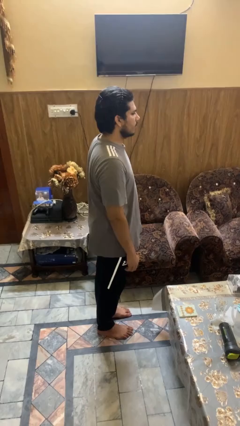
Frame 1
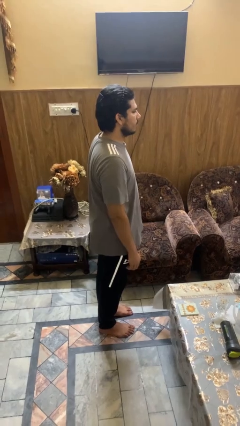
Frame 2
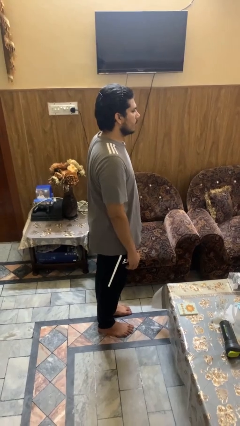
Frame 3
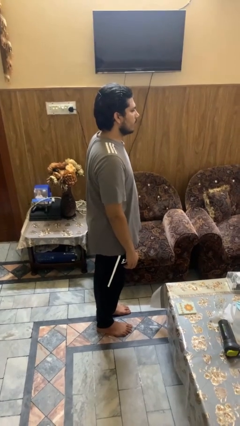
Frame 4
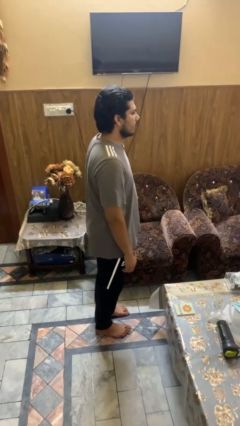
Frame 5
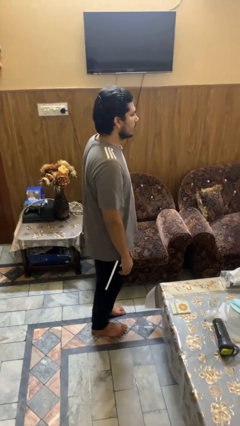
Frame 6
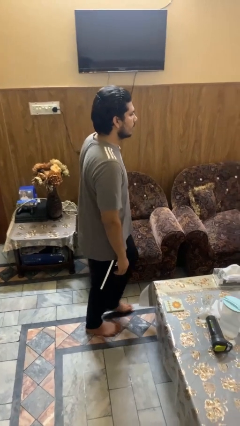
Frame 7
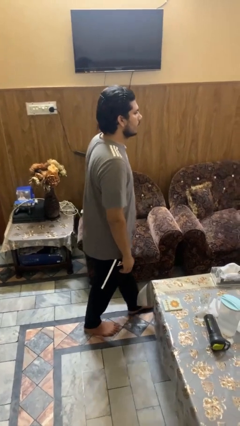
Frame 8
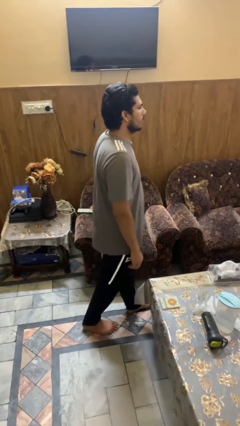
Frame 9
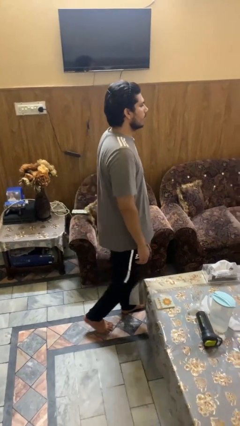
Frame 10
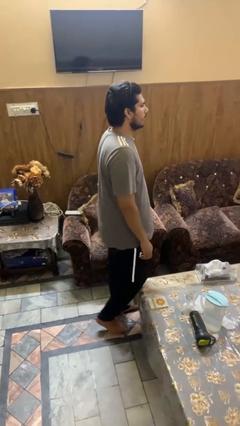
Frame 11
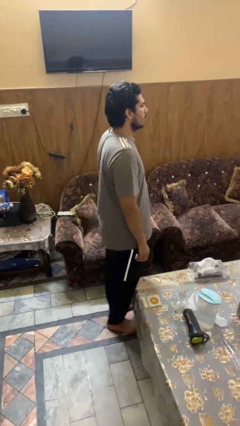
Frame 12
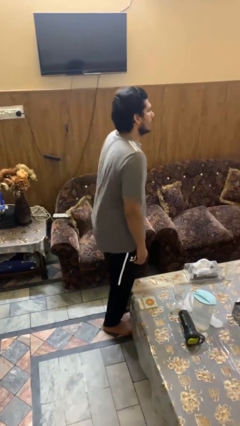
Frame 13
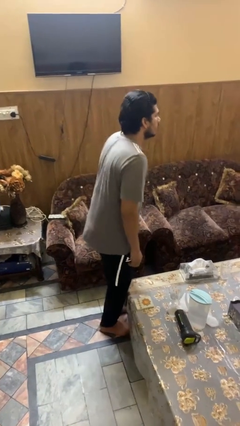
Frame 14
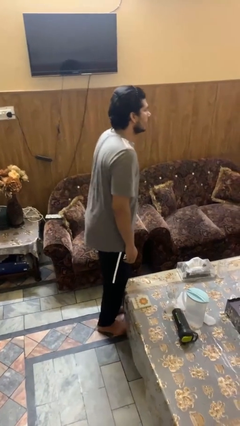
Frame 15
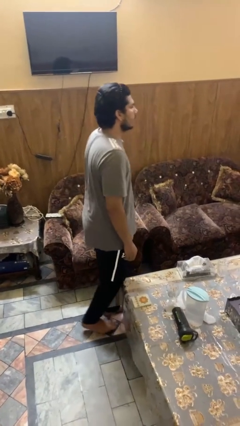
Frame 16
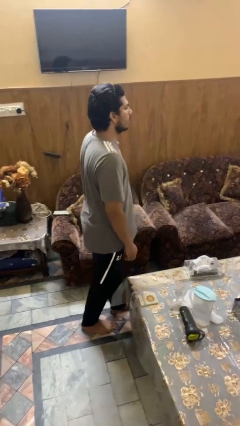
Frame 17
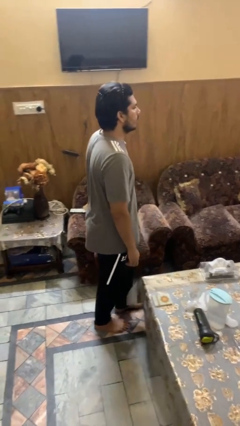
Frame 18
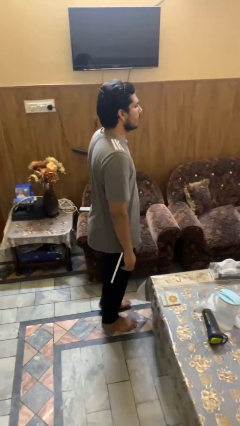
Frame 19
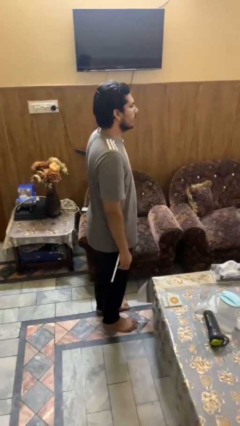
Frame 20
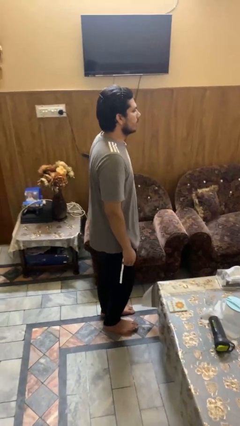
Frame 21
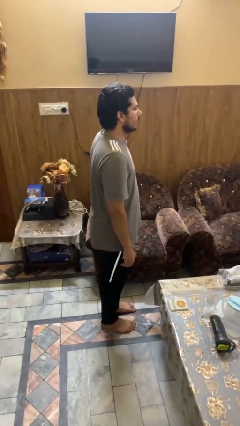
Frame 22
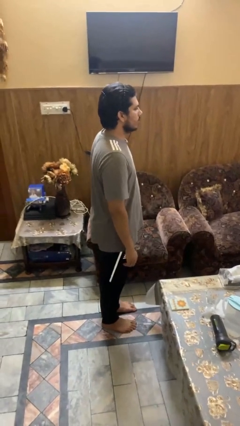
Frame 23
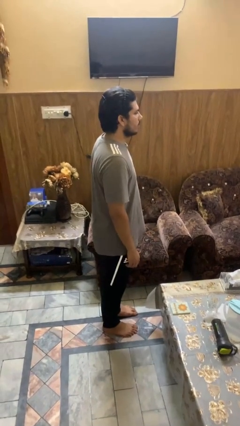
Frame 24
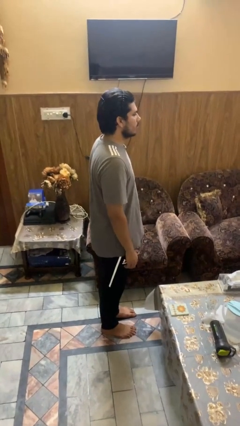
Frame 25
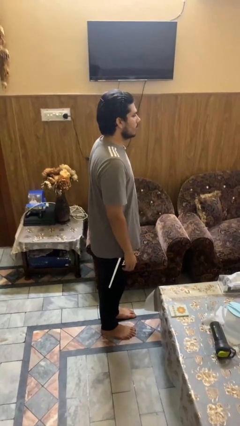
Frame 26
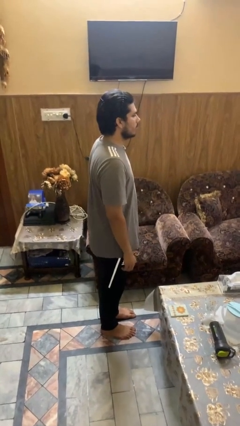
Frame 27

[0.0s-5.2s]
person bumps into table

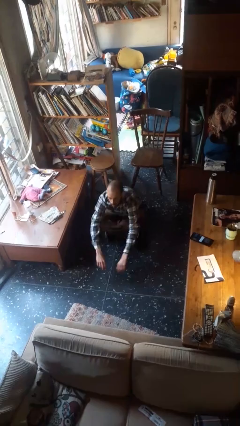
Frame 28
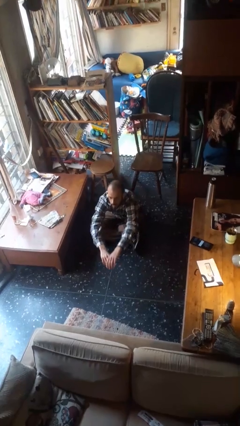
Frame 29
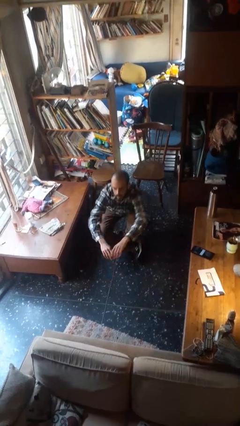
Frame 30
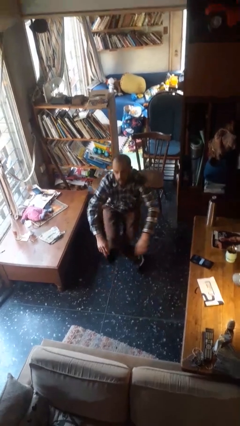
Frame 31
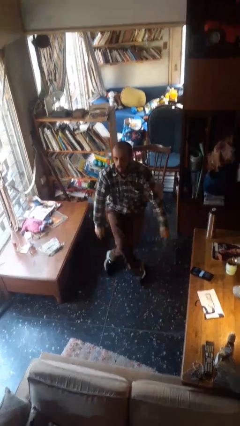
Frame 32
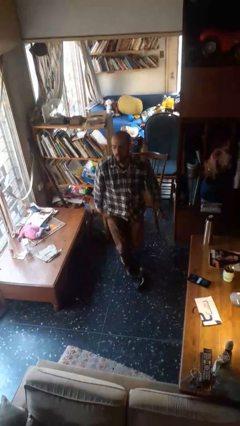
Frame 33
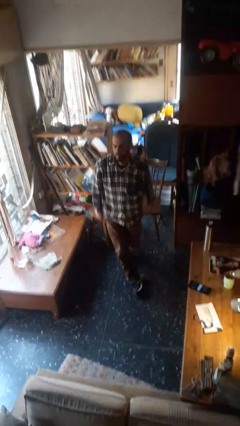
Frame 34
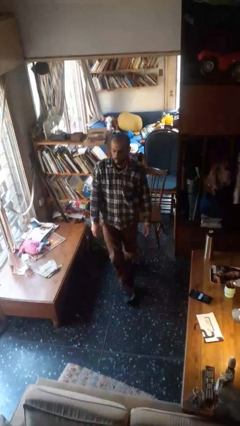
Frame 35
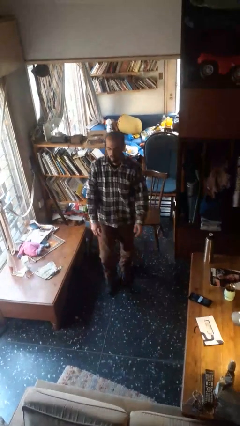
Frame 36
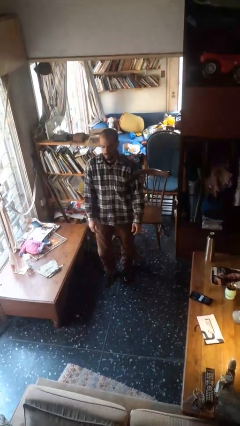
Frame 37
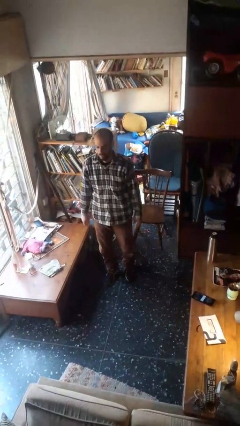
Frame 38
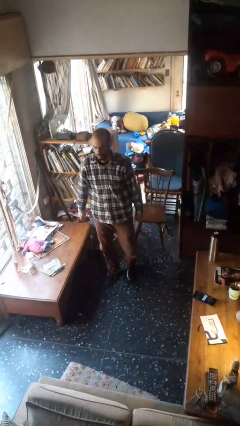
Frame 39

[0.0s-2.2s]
person stands up from floor

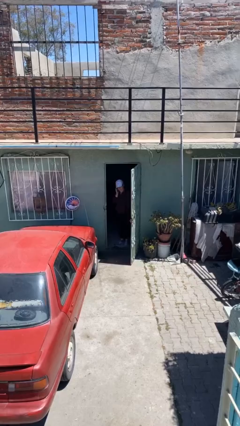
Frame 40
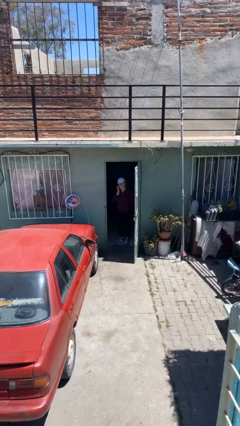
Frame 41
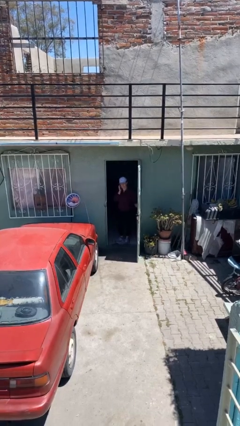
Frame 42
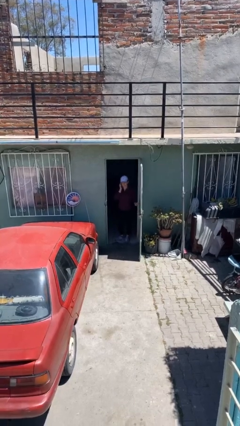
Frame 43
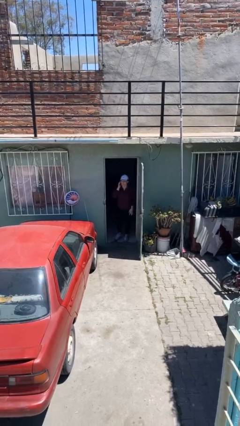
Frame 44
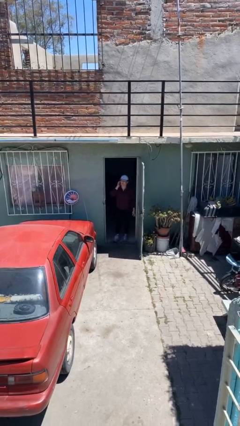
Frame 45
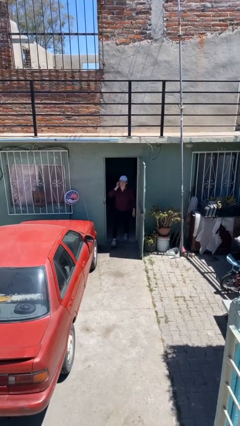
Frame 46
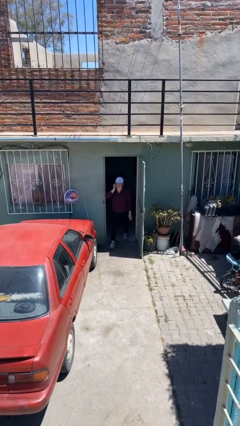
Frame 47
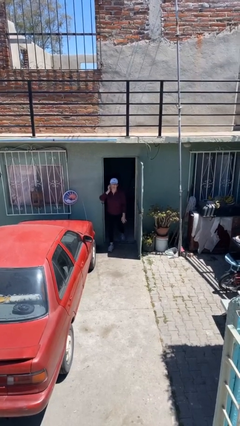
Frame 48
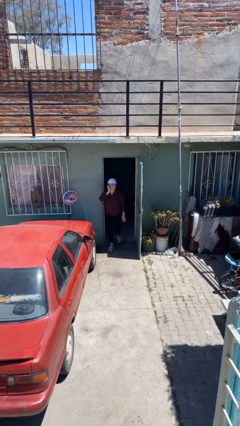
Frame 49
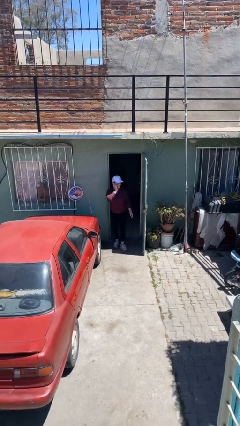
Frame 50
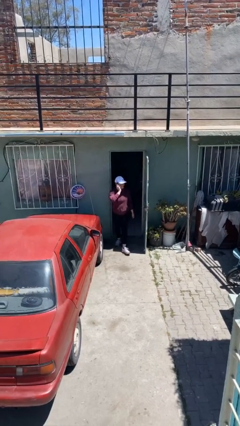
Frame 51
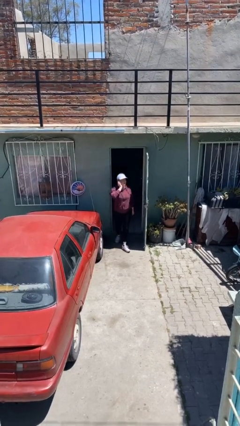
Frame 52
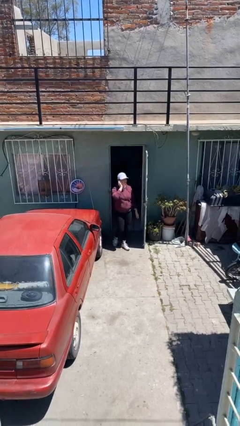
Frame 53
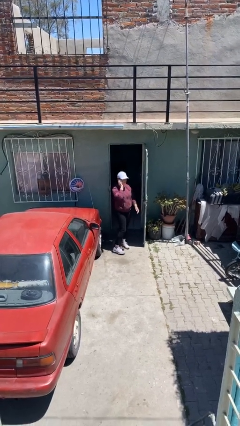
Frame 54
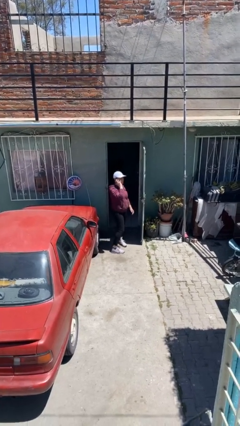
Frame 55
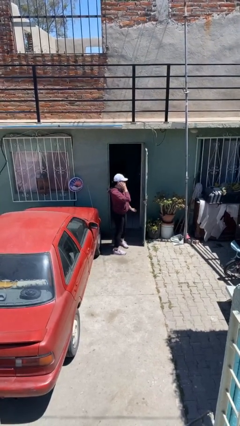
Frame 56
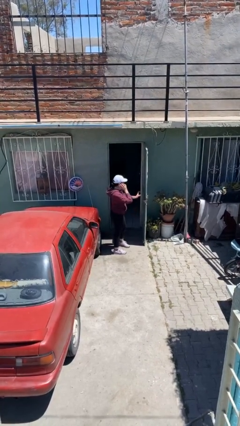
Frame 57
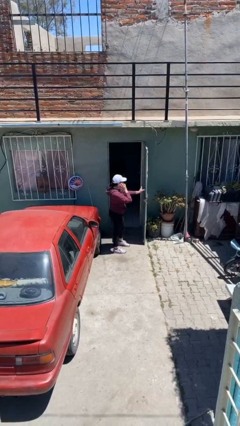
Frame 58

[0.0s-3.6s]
person enters scene through structure

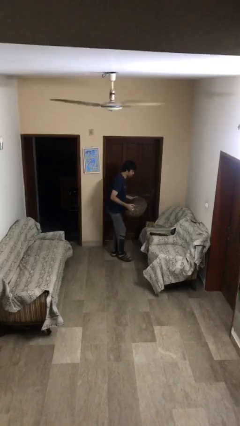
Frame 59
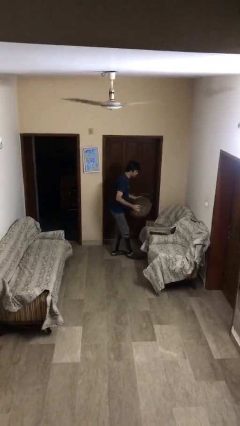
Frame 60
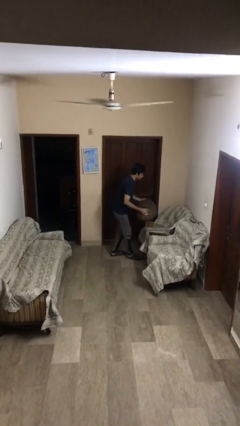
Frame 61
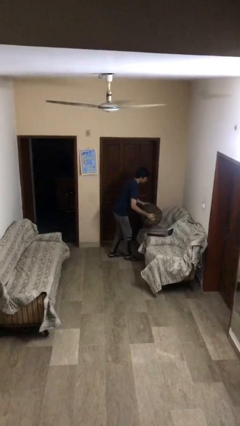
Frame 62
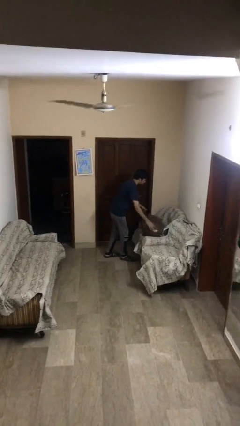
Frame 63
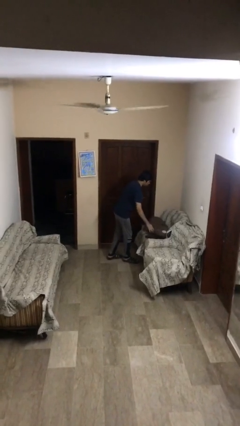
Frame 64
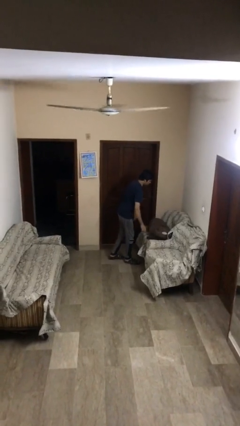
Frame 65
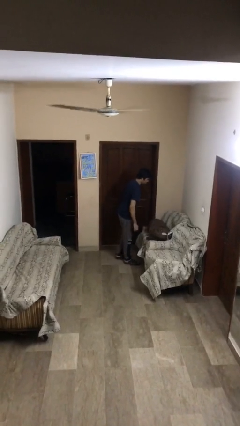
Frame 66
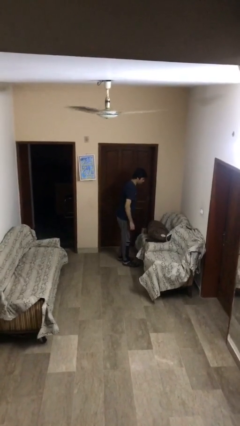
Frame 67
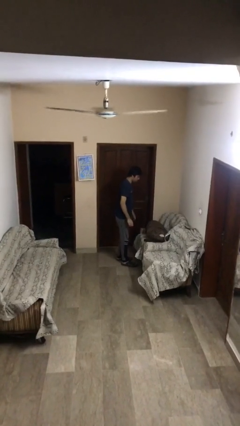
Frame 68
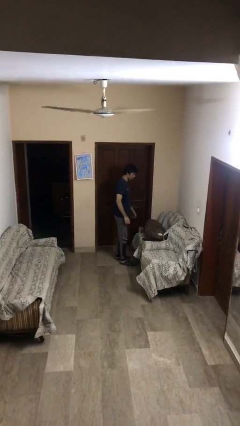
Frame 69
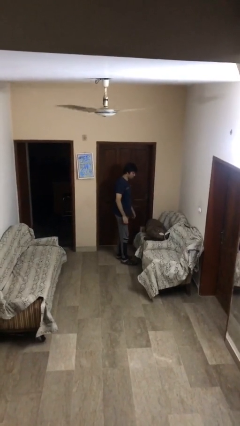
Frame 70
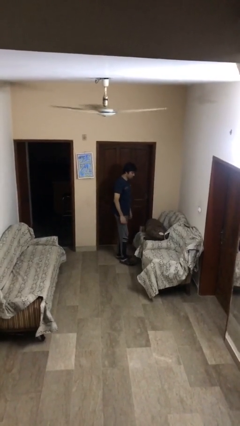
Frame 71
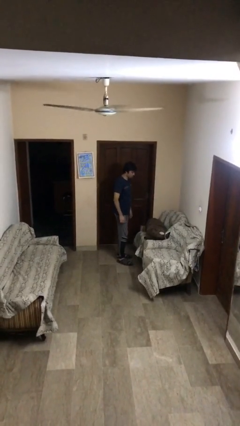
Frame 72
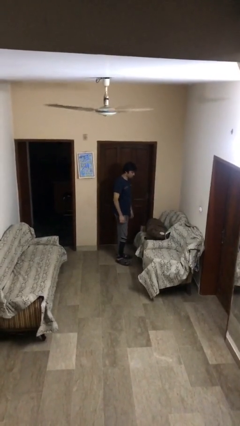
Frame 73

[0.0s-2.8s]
person puts down object on floor

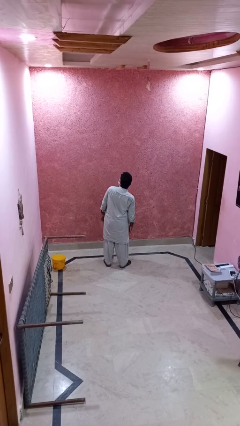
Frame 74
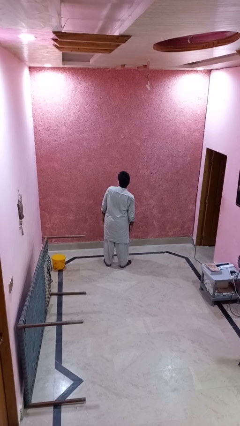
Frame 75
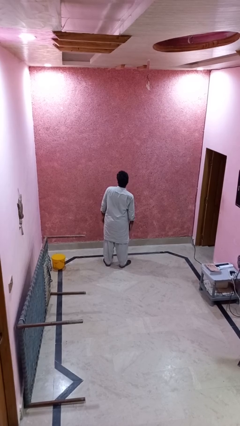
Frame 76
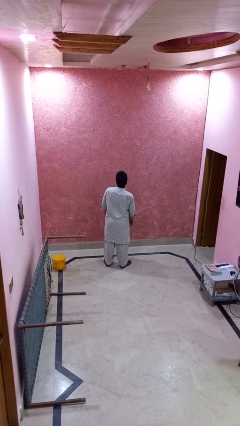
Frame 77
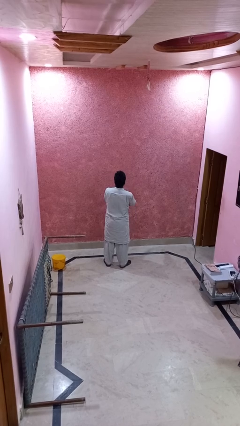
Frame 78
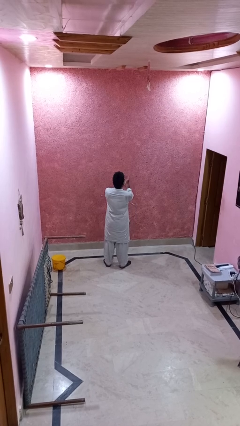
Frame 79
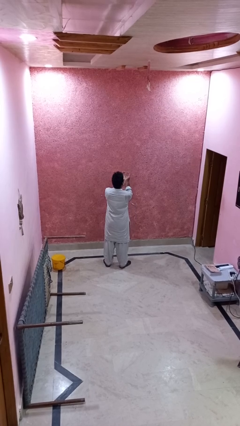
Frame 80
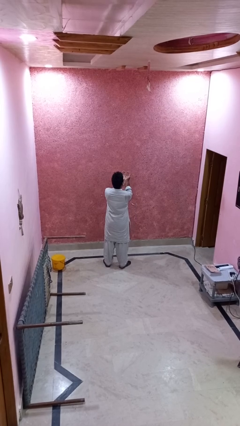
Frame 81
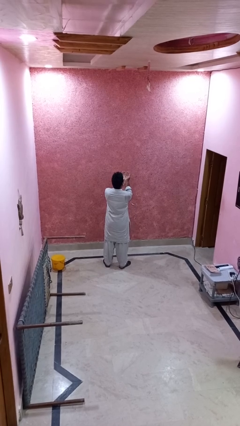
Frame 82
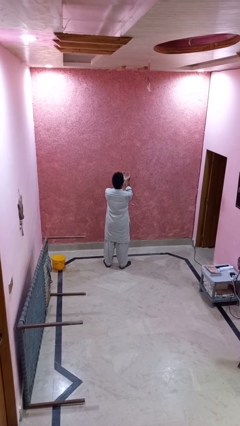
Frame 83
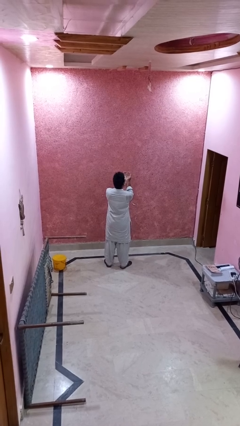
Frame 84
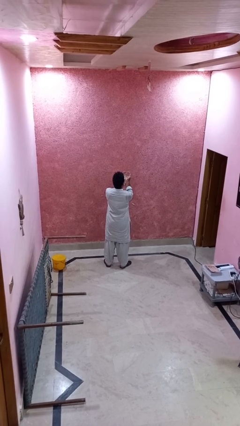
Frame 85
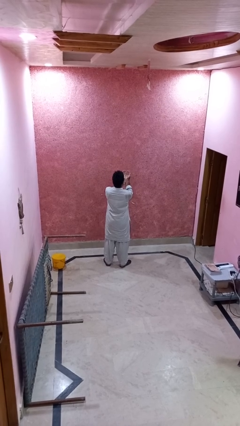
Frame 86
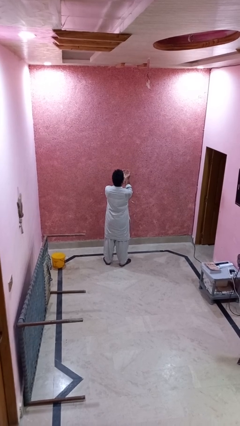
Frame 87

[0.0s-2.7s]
person prays

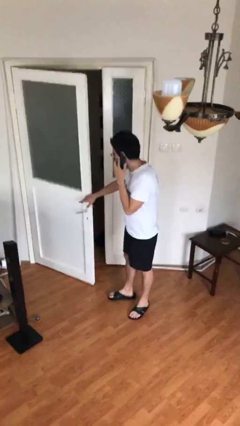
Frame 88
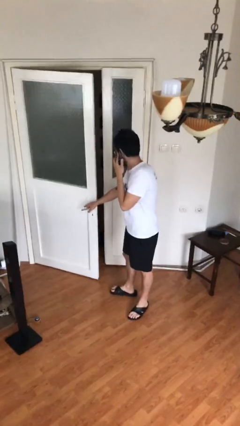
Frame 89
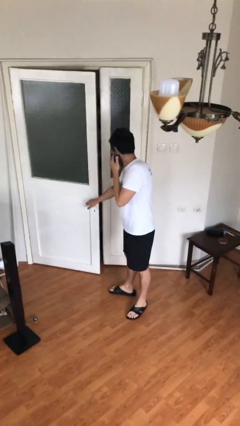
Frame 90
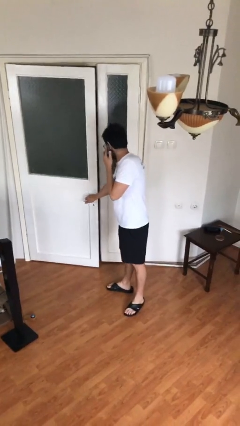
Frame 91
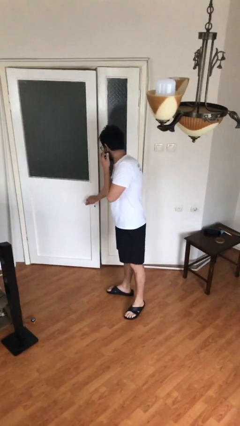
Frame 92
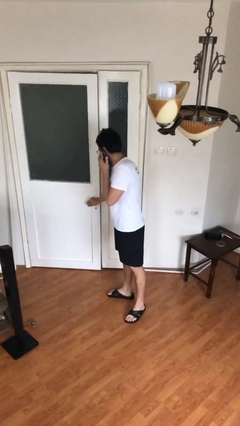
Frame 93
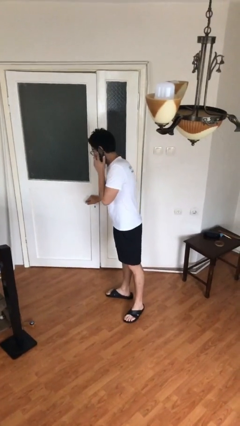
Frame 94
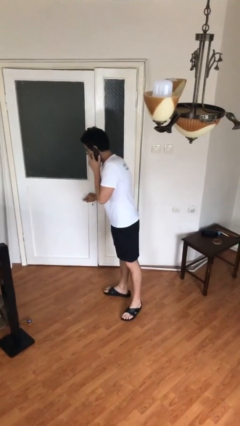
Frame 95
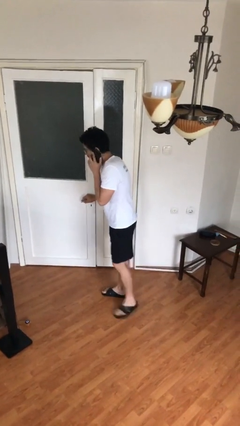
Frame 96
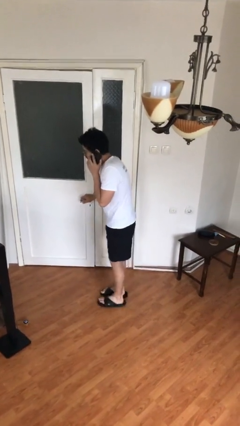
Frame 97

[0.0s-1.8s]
person closes facility door
